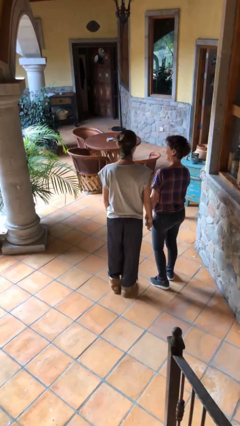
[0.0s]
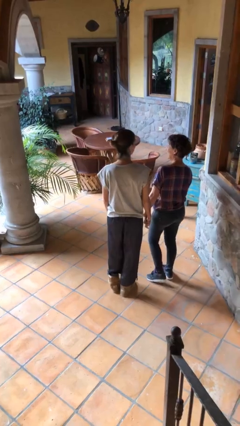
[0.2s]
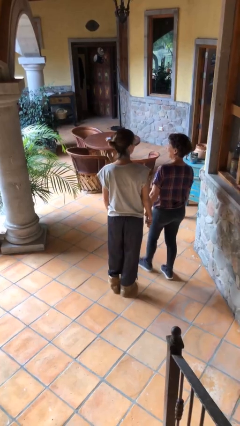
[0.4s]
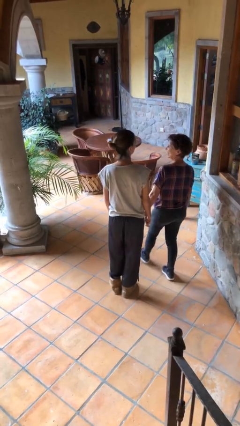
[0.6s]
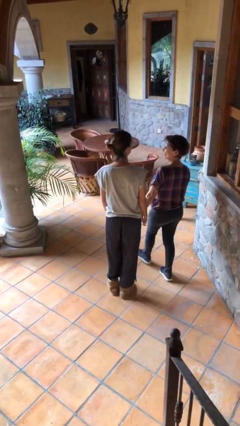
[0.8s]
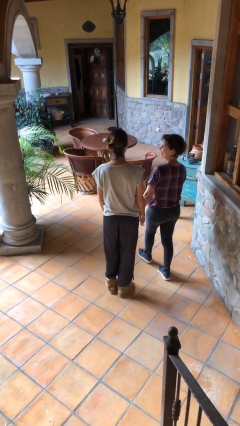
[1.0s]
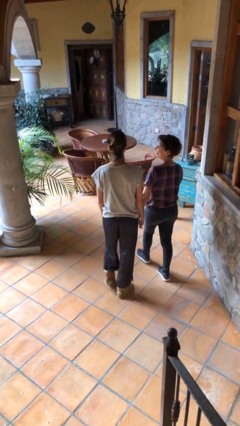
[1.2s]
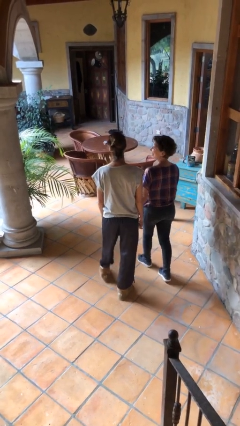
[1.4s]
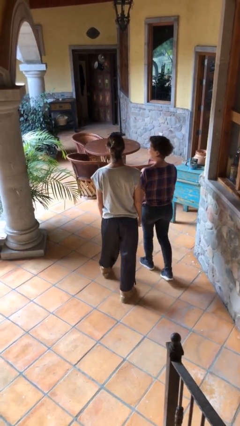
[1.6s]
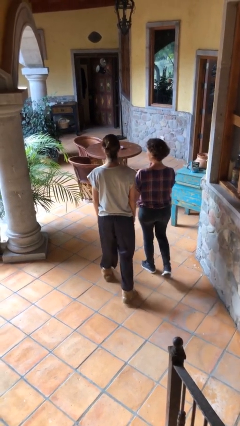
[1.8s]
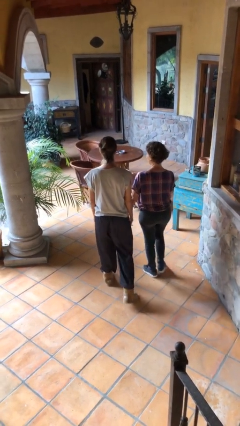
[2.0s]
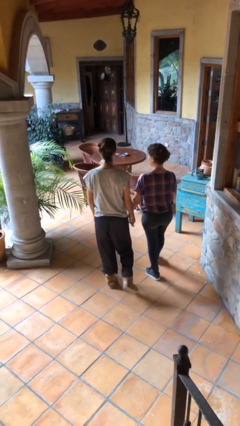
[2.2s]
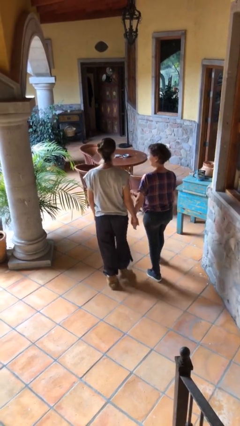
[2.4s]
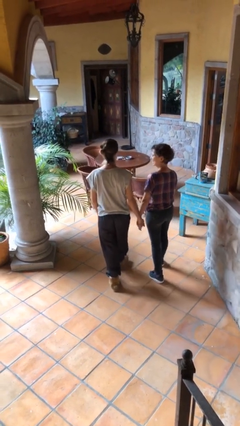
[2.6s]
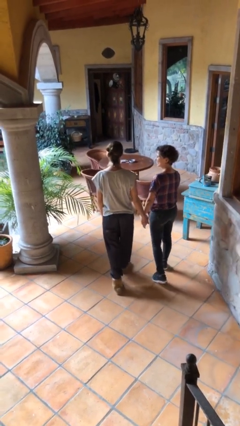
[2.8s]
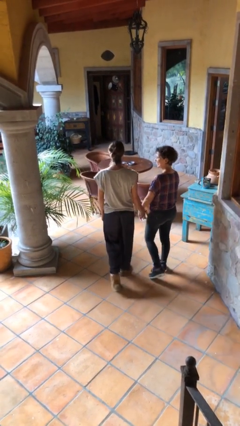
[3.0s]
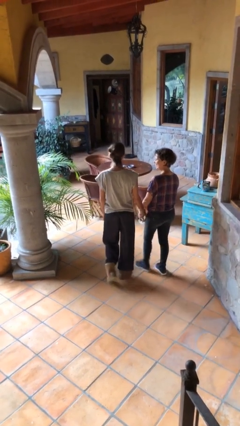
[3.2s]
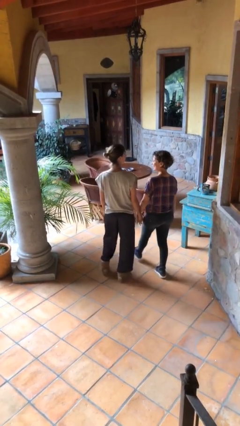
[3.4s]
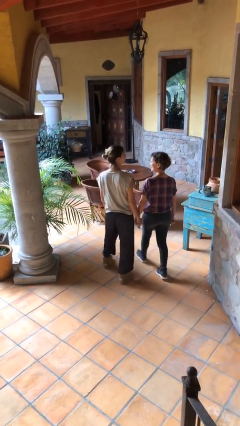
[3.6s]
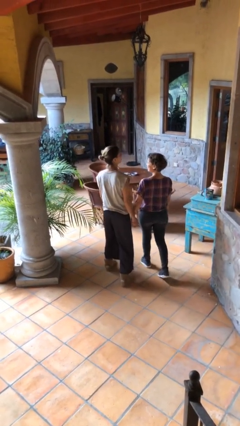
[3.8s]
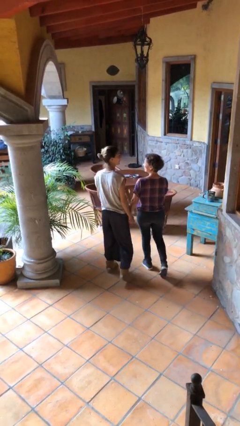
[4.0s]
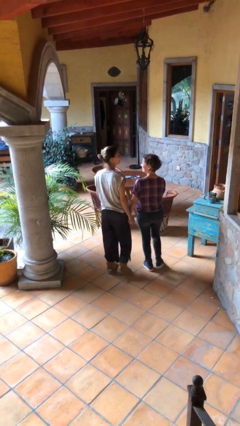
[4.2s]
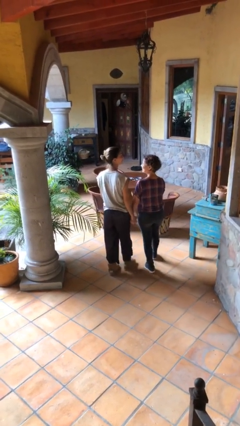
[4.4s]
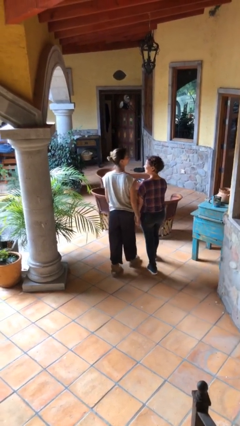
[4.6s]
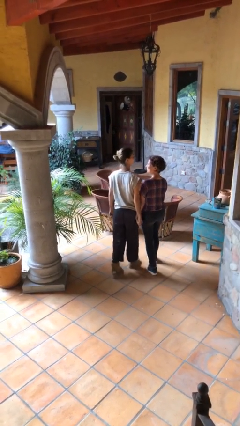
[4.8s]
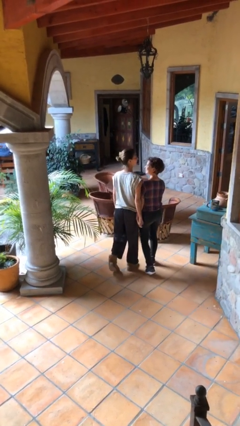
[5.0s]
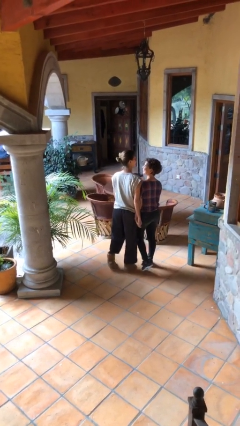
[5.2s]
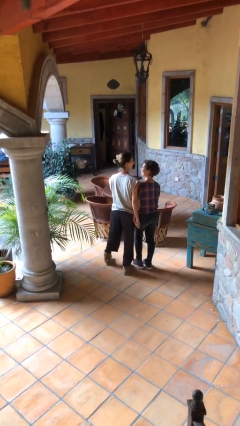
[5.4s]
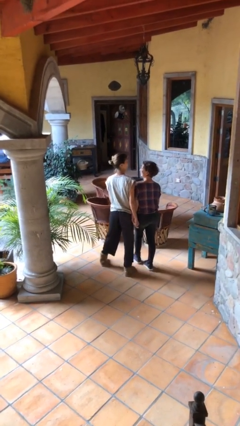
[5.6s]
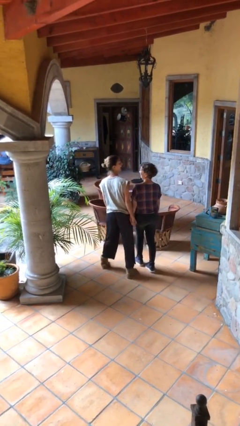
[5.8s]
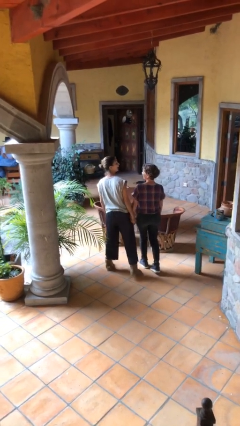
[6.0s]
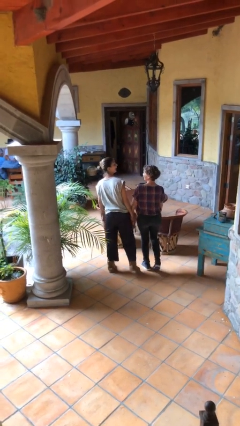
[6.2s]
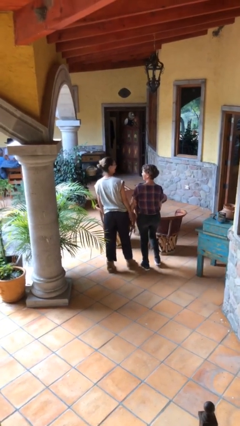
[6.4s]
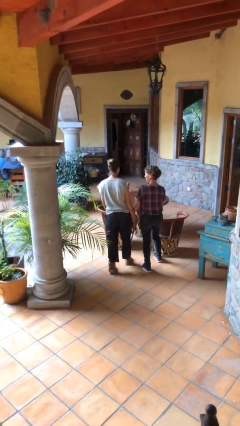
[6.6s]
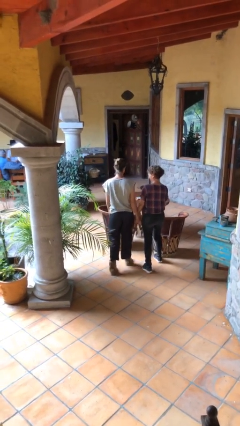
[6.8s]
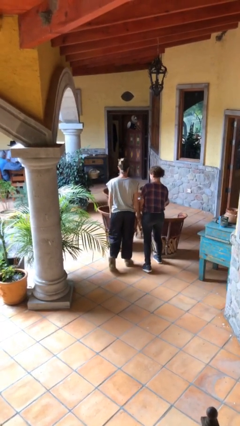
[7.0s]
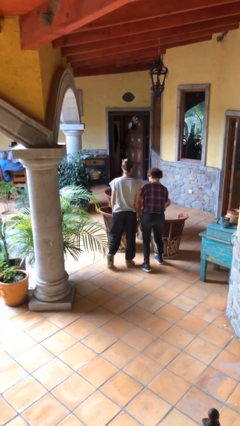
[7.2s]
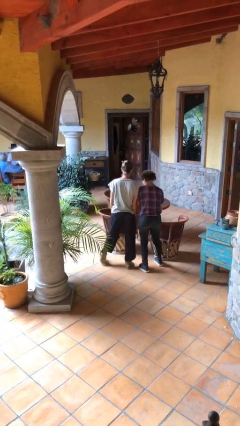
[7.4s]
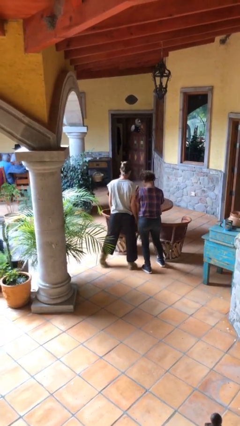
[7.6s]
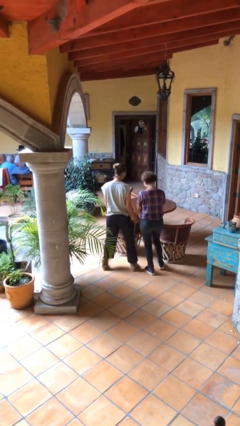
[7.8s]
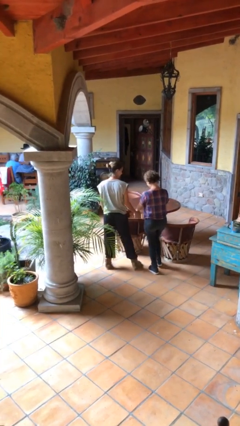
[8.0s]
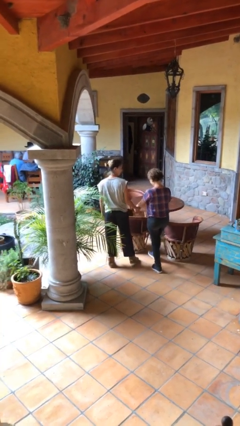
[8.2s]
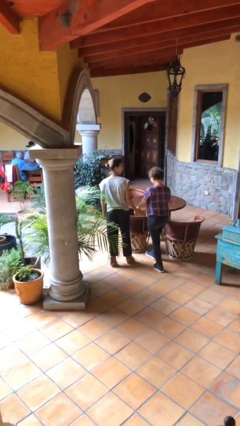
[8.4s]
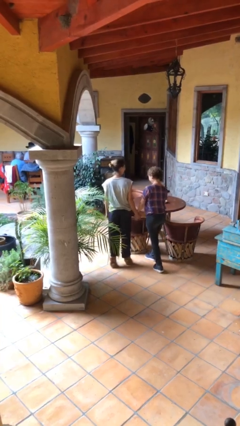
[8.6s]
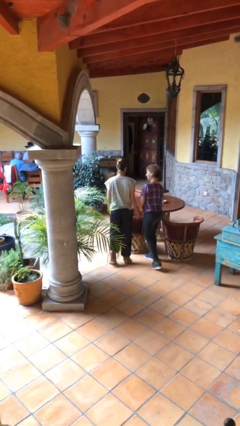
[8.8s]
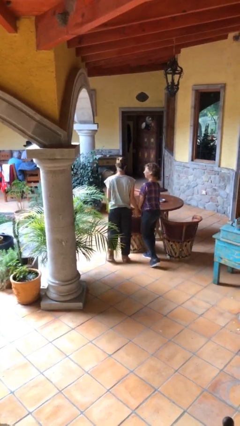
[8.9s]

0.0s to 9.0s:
person holds hand

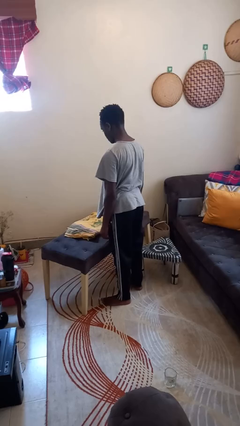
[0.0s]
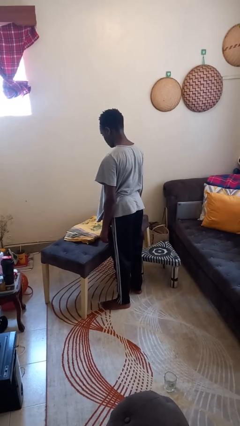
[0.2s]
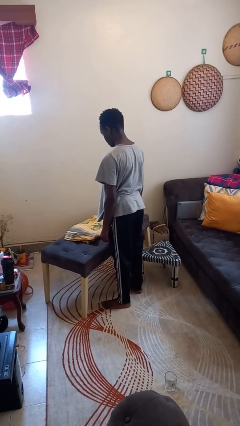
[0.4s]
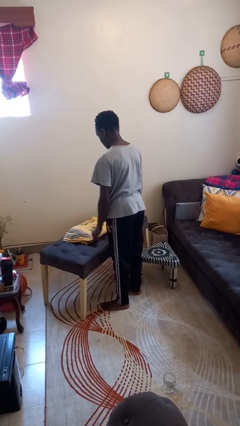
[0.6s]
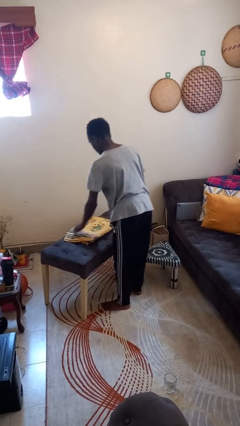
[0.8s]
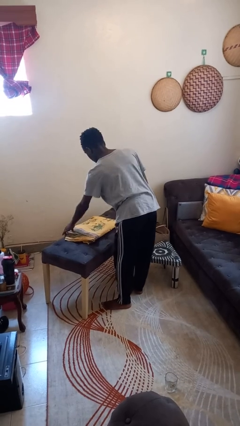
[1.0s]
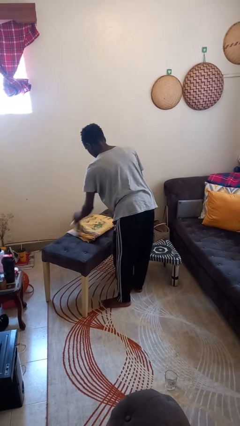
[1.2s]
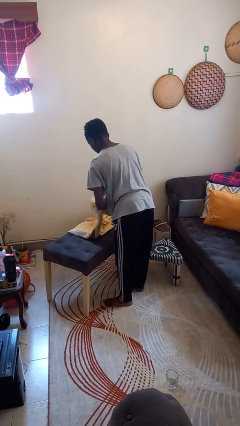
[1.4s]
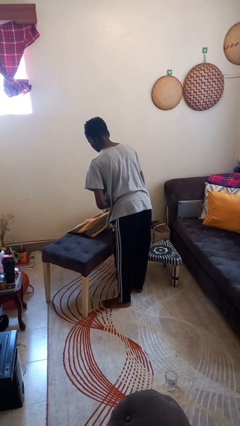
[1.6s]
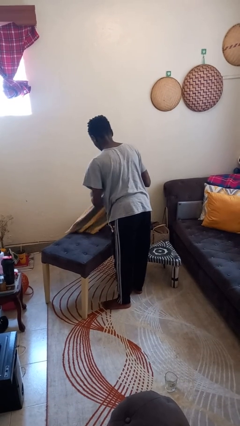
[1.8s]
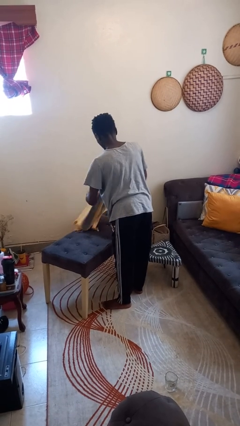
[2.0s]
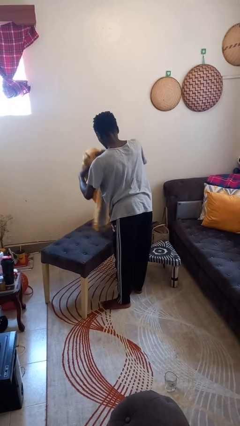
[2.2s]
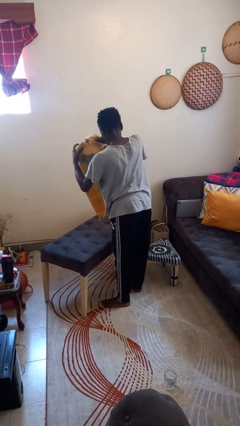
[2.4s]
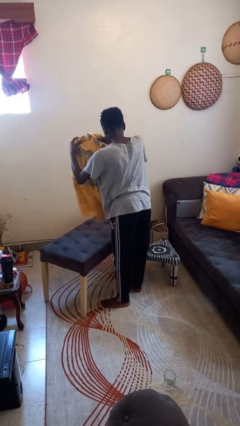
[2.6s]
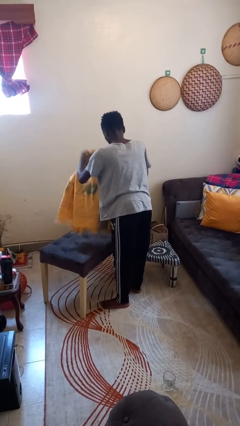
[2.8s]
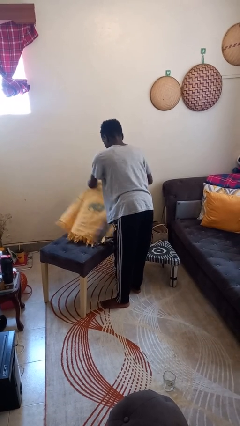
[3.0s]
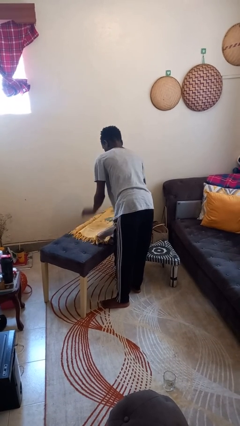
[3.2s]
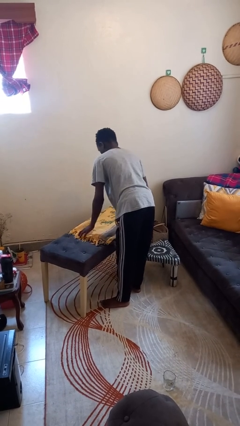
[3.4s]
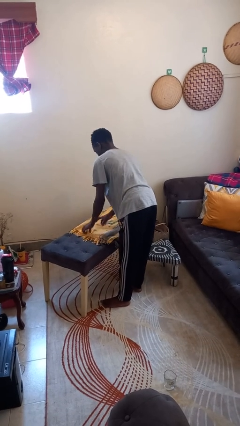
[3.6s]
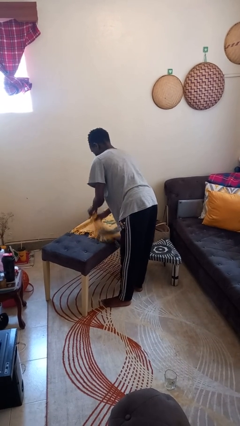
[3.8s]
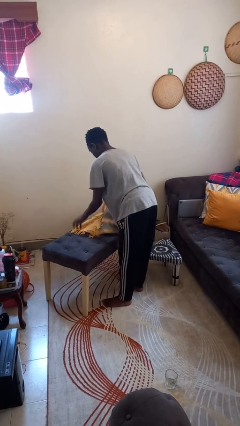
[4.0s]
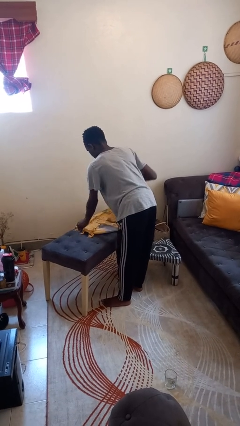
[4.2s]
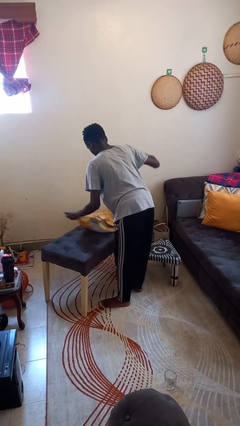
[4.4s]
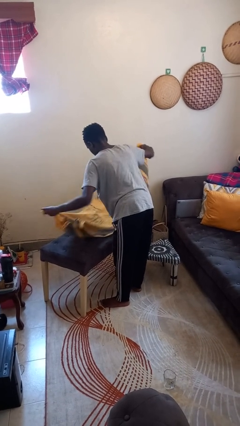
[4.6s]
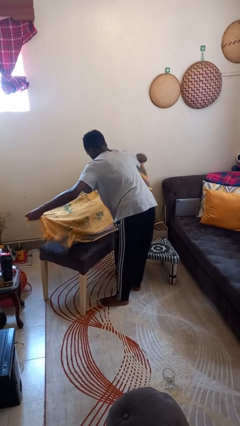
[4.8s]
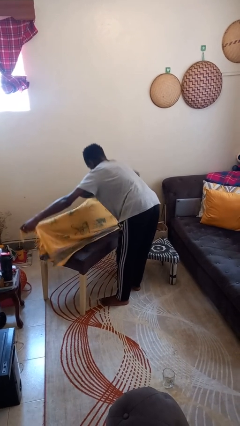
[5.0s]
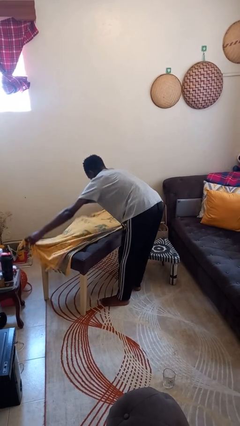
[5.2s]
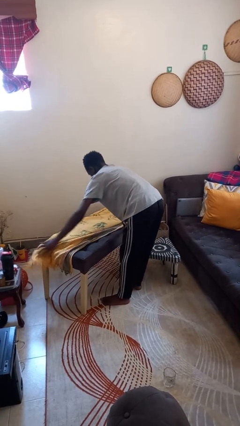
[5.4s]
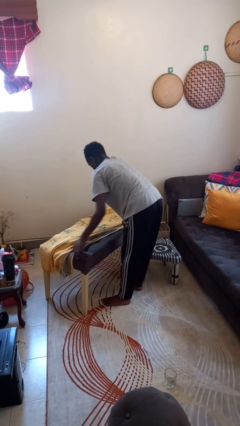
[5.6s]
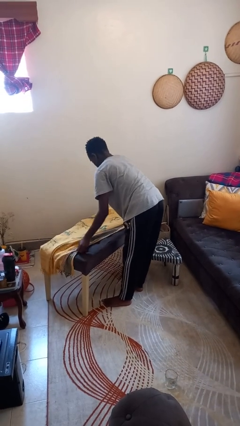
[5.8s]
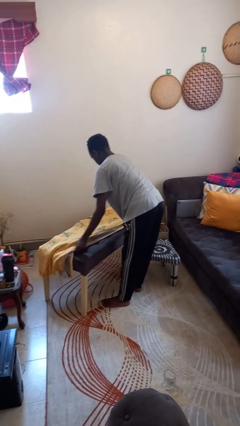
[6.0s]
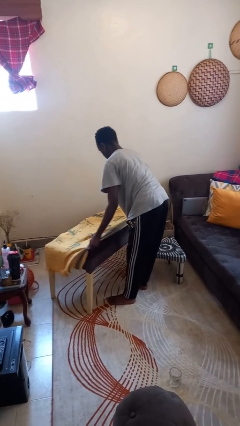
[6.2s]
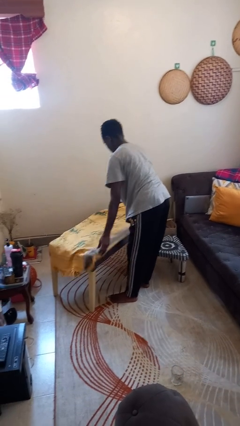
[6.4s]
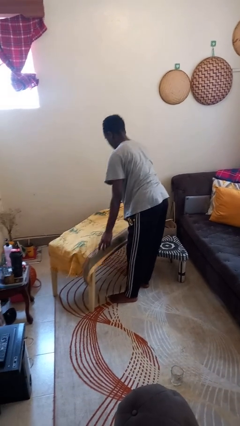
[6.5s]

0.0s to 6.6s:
person spreads tablecloth

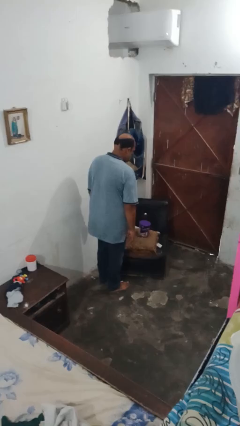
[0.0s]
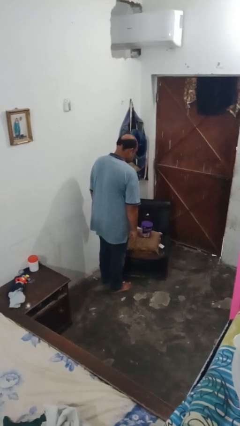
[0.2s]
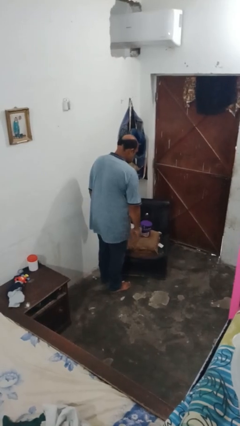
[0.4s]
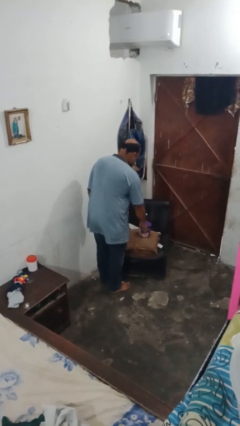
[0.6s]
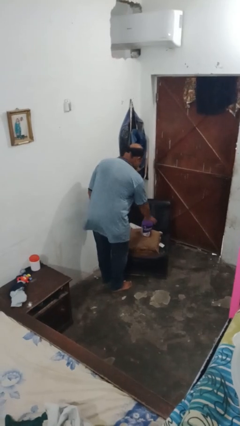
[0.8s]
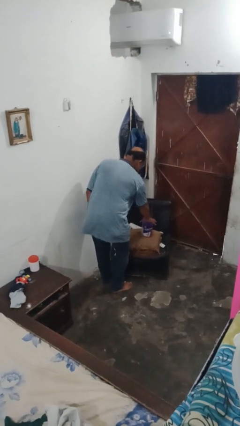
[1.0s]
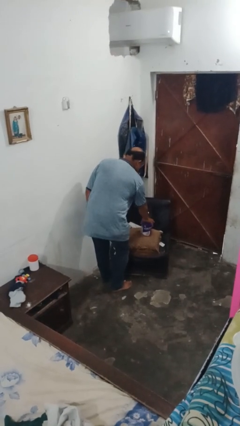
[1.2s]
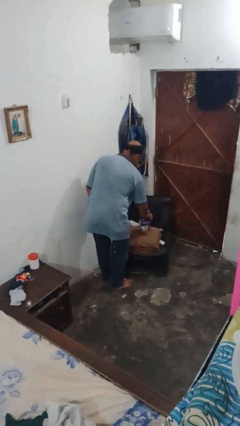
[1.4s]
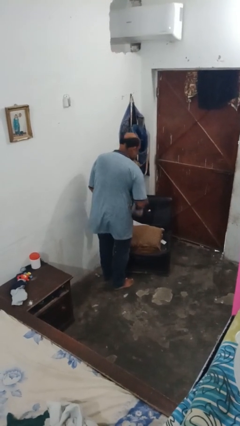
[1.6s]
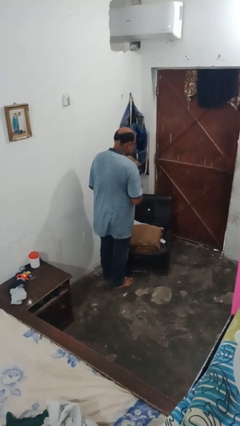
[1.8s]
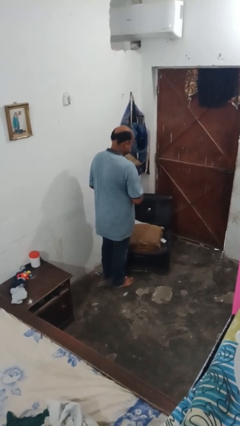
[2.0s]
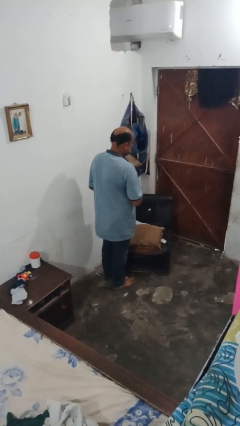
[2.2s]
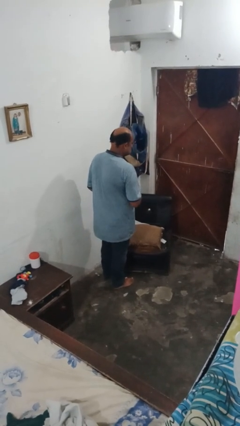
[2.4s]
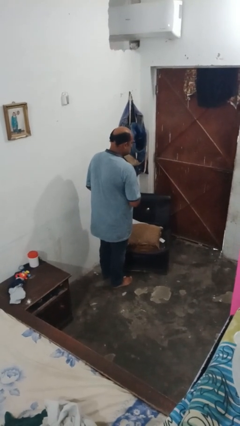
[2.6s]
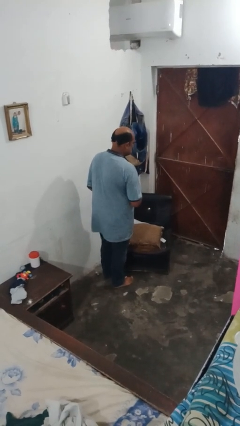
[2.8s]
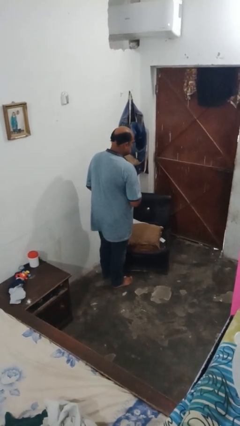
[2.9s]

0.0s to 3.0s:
person picks up object from couch
